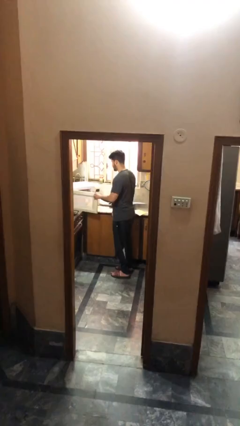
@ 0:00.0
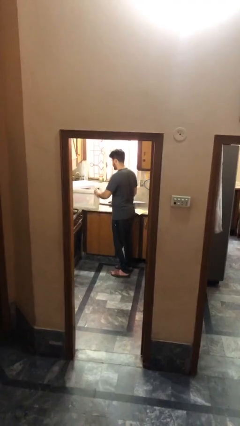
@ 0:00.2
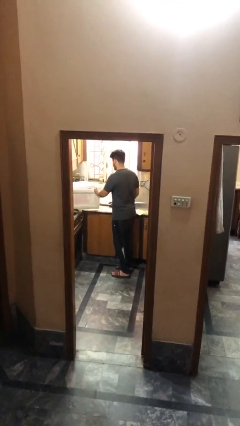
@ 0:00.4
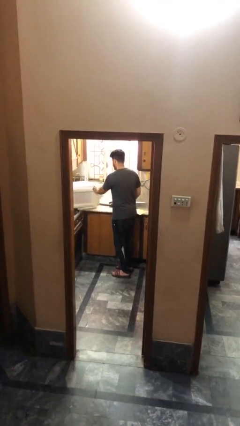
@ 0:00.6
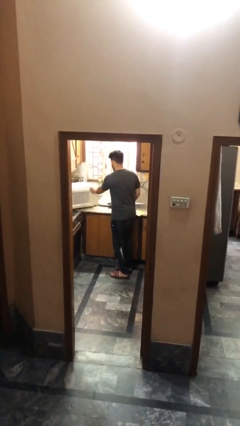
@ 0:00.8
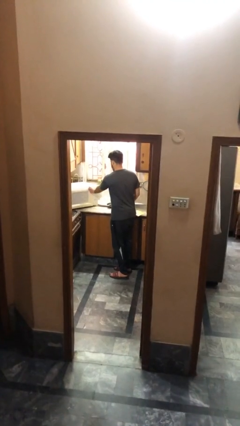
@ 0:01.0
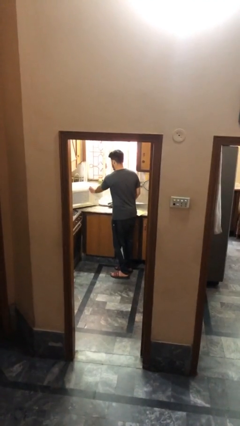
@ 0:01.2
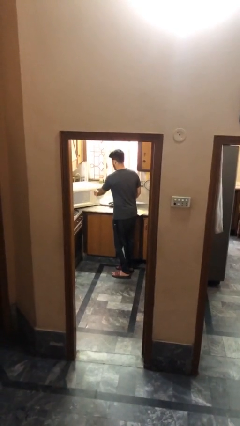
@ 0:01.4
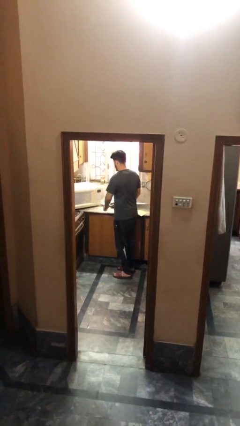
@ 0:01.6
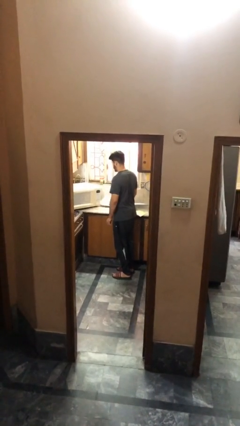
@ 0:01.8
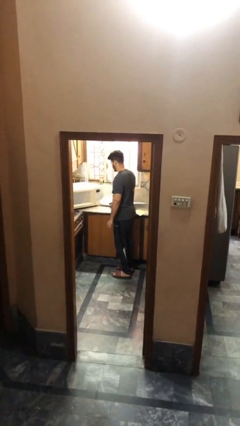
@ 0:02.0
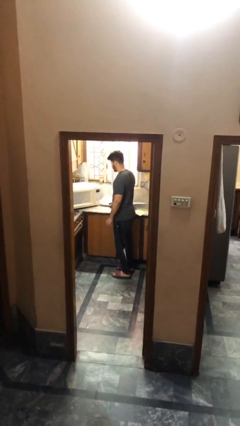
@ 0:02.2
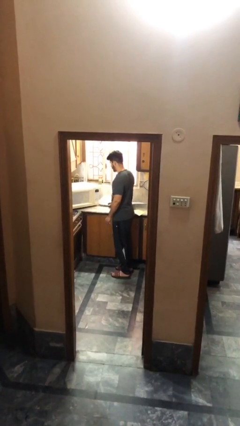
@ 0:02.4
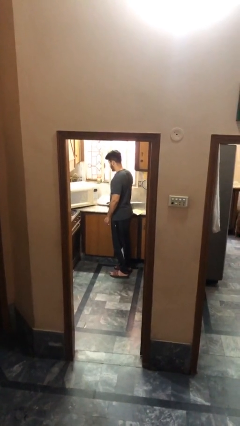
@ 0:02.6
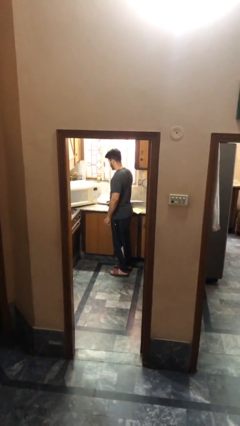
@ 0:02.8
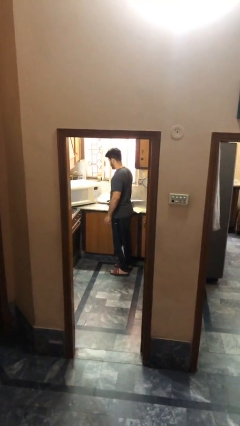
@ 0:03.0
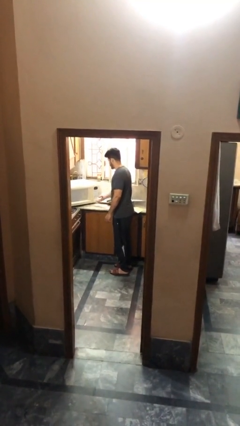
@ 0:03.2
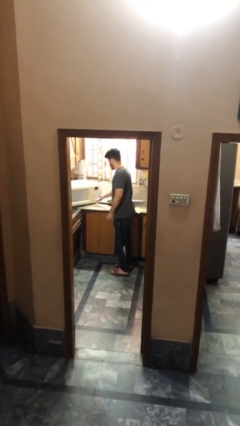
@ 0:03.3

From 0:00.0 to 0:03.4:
person closes microwave

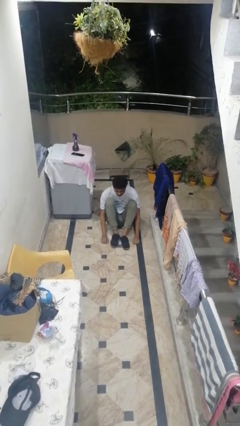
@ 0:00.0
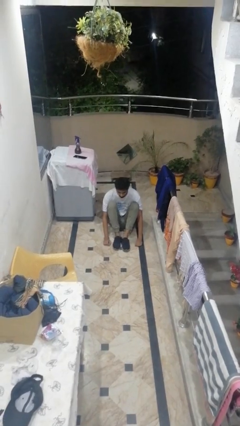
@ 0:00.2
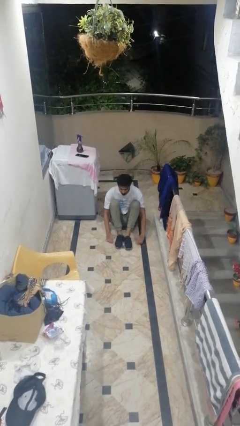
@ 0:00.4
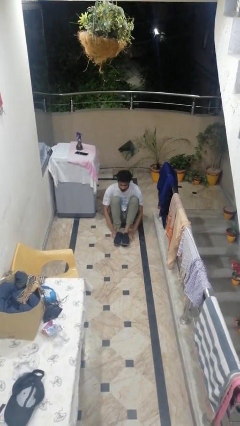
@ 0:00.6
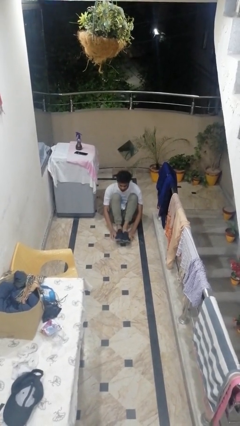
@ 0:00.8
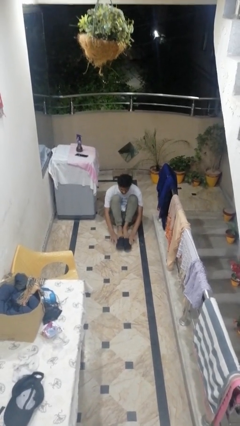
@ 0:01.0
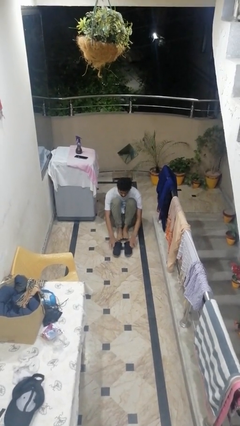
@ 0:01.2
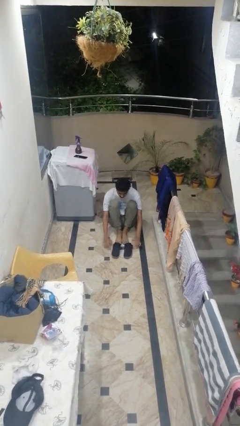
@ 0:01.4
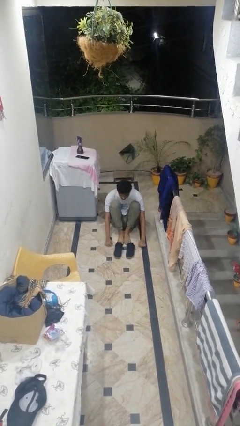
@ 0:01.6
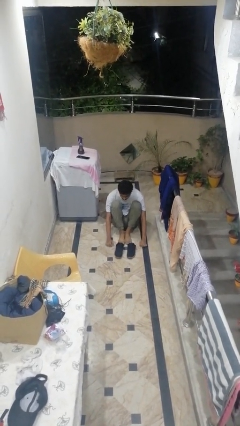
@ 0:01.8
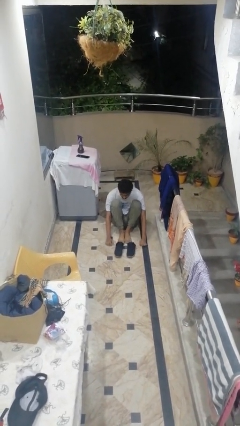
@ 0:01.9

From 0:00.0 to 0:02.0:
person takes off shoes

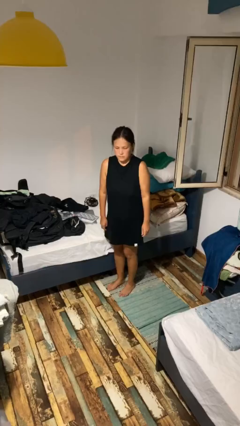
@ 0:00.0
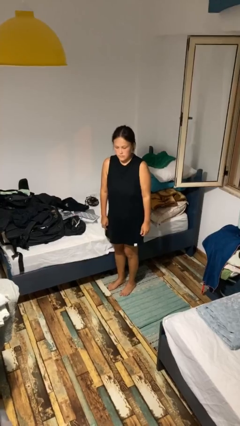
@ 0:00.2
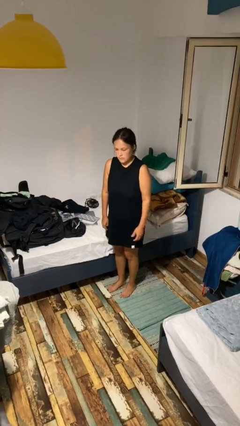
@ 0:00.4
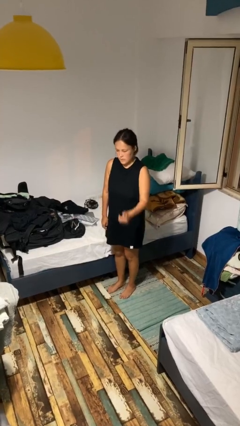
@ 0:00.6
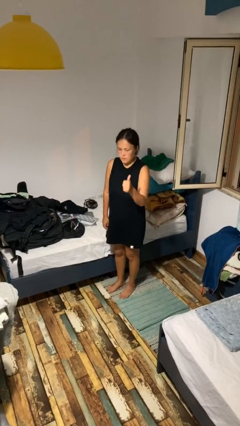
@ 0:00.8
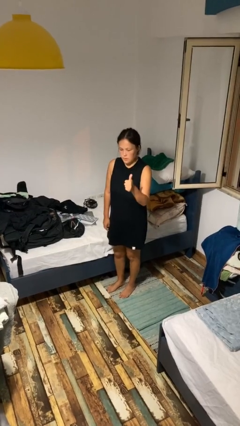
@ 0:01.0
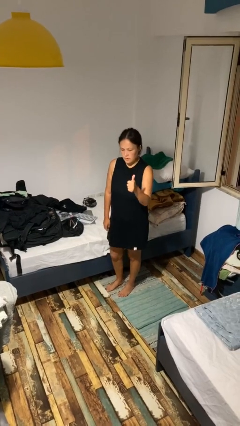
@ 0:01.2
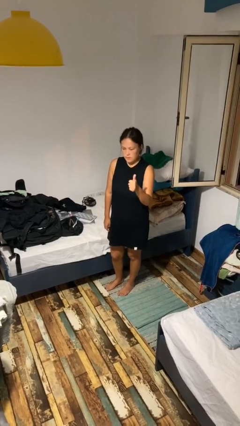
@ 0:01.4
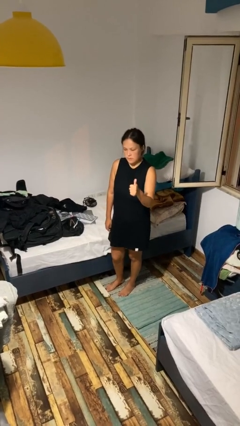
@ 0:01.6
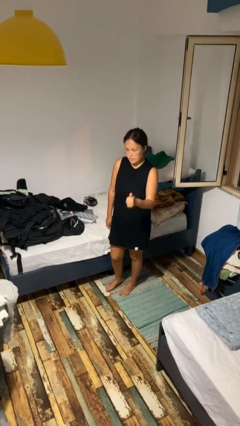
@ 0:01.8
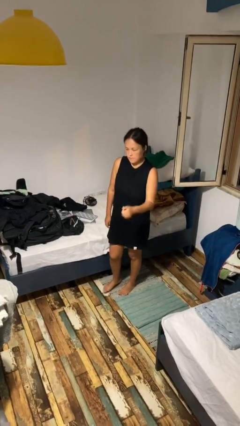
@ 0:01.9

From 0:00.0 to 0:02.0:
person gestures thumbs up

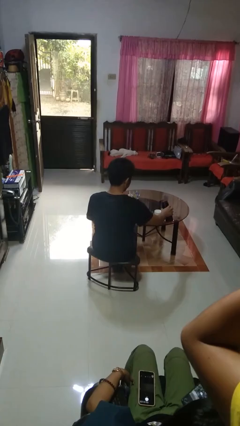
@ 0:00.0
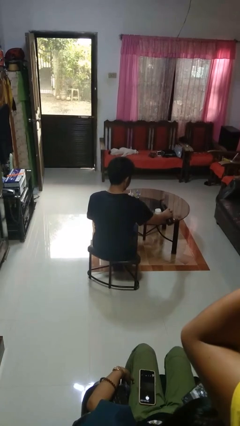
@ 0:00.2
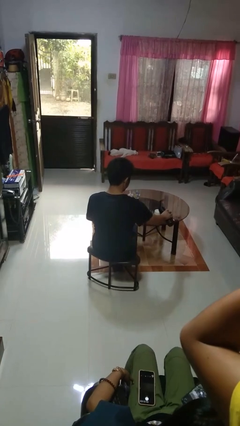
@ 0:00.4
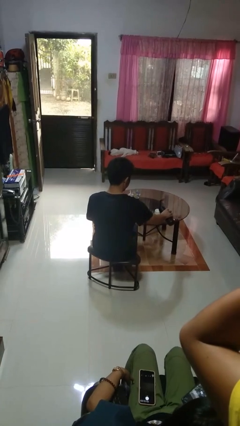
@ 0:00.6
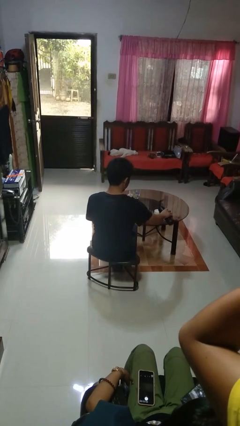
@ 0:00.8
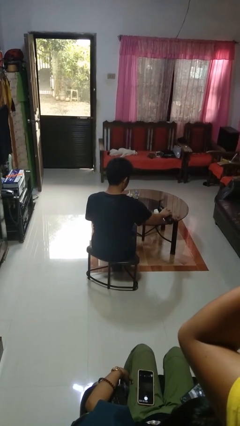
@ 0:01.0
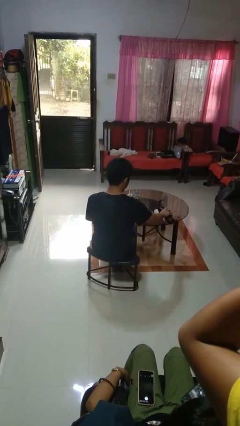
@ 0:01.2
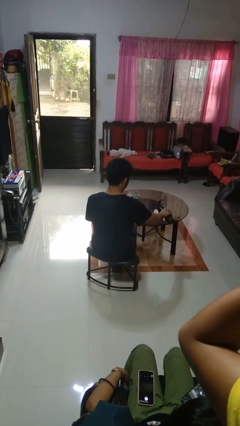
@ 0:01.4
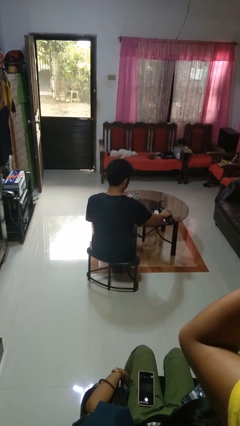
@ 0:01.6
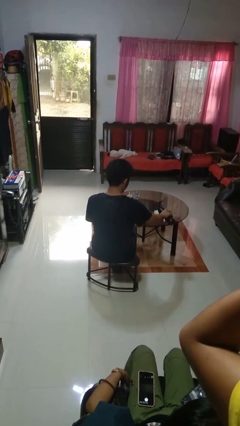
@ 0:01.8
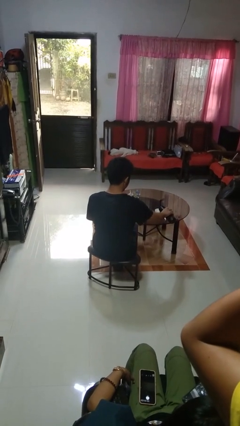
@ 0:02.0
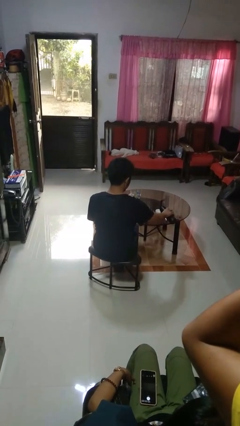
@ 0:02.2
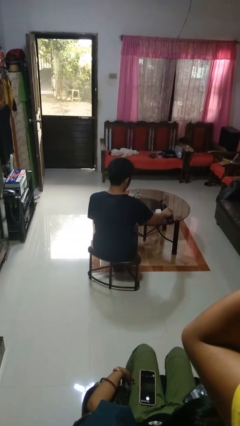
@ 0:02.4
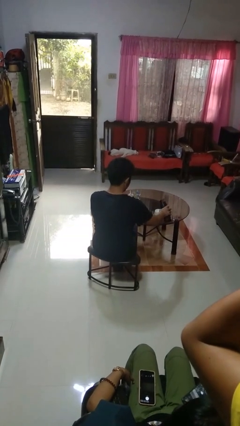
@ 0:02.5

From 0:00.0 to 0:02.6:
person pours liquid into cup

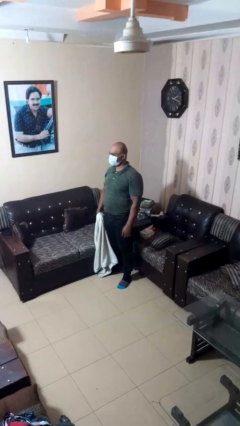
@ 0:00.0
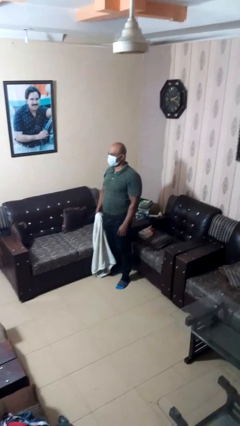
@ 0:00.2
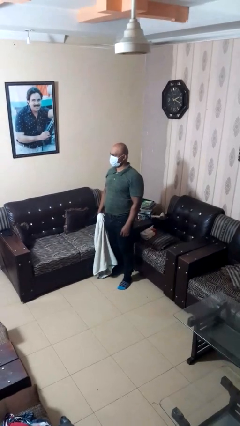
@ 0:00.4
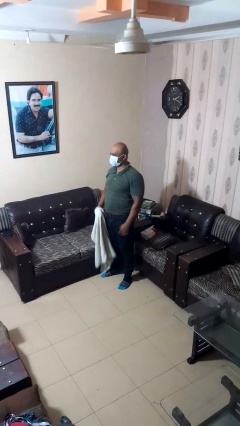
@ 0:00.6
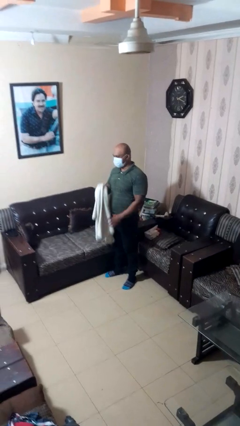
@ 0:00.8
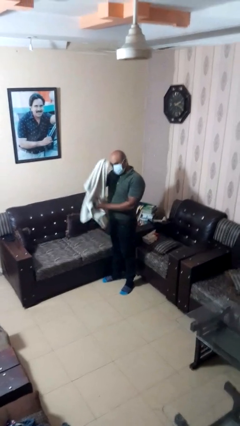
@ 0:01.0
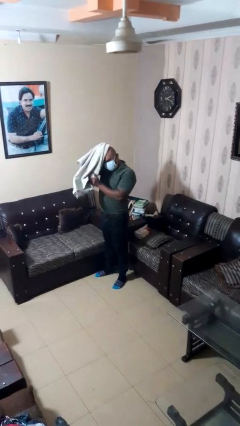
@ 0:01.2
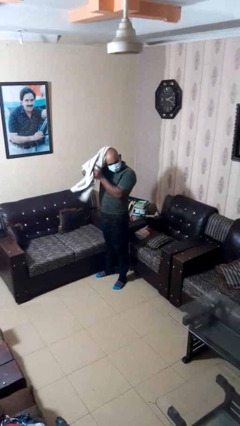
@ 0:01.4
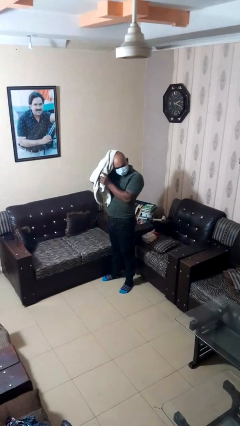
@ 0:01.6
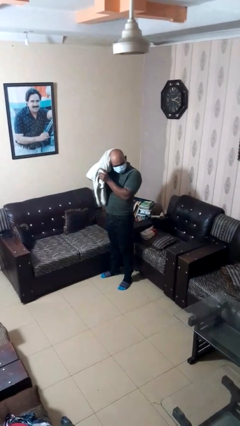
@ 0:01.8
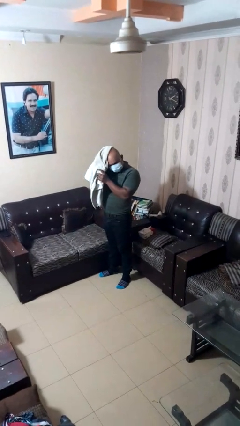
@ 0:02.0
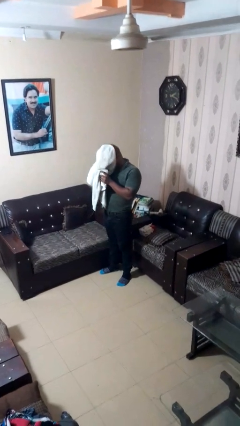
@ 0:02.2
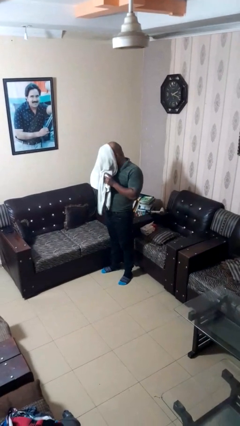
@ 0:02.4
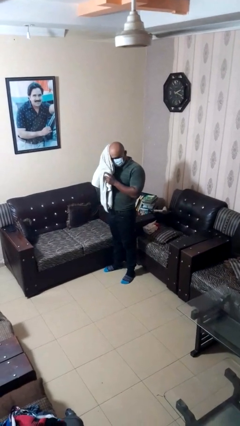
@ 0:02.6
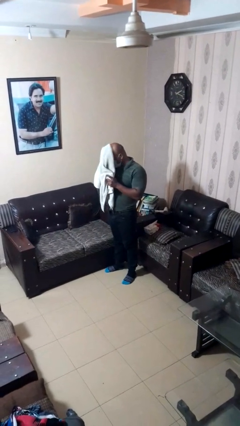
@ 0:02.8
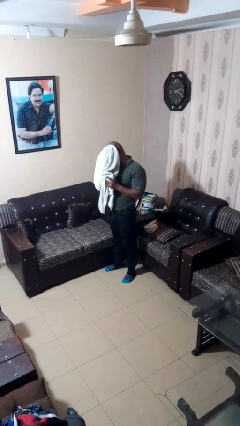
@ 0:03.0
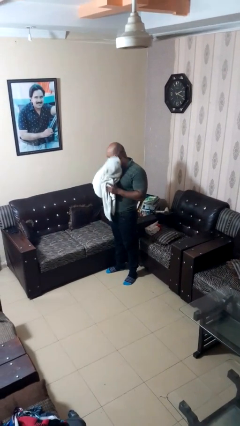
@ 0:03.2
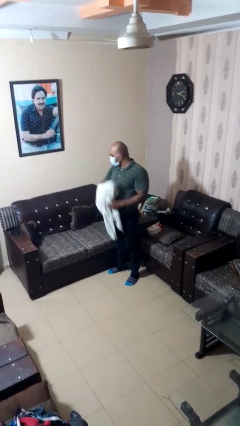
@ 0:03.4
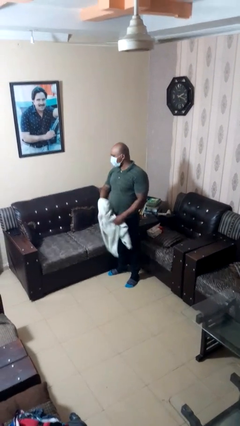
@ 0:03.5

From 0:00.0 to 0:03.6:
person dries hair with towel

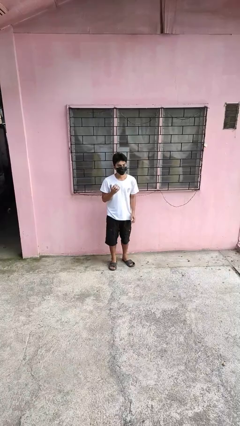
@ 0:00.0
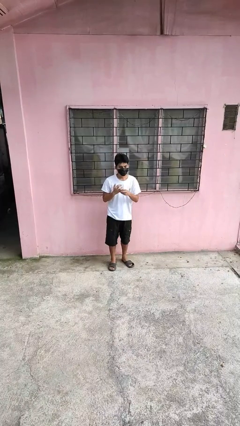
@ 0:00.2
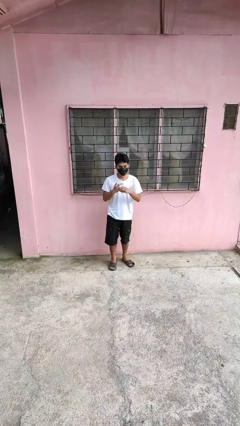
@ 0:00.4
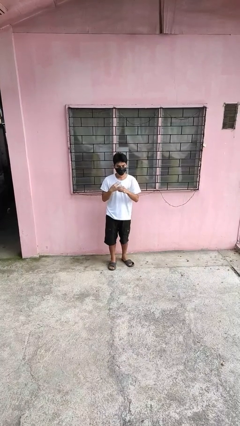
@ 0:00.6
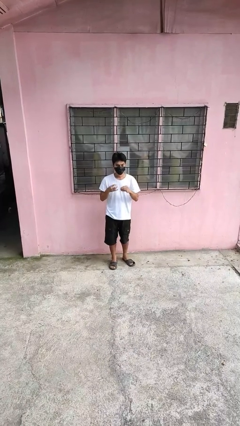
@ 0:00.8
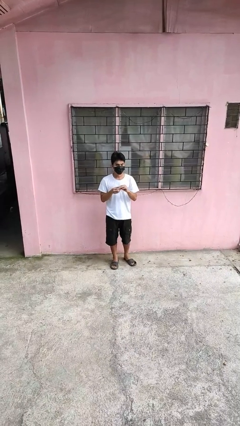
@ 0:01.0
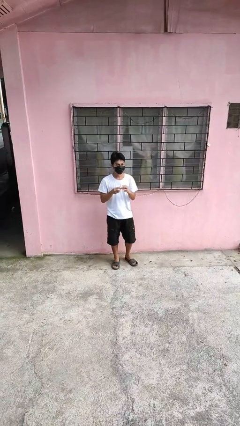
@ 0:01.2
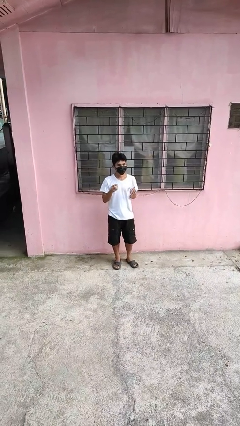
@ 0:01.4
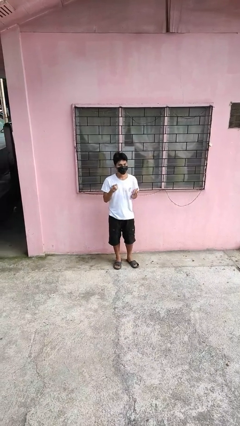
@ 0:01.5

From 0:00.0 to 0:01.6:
person takes off ring

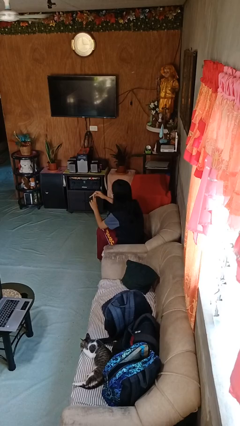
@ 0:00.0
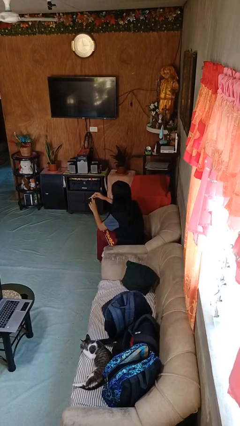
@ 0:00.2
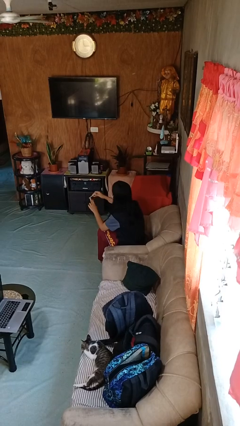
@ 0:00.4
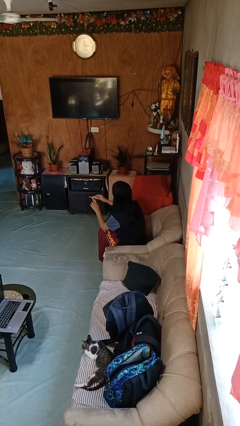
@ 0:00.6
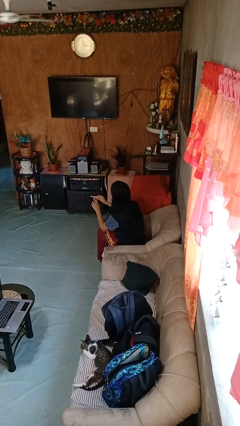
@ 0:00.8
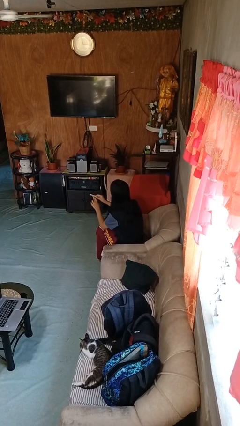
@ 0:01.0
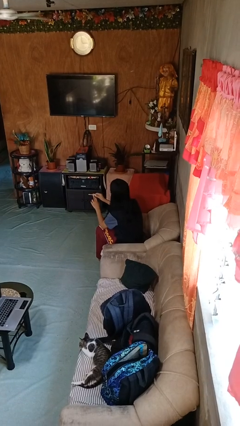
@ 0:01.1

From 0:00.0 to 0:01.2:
person files fingernails

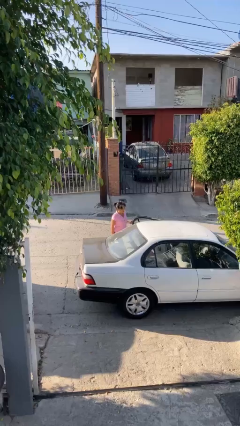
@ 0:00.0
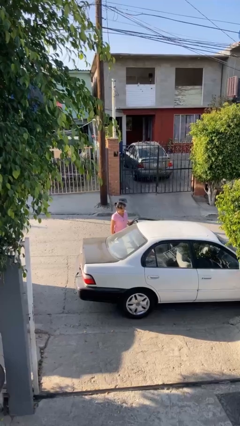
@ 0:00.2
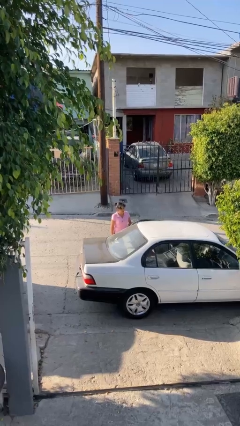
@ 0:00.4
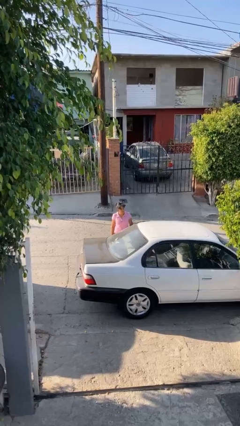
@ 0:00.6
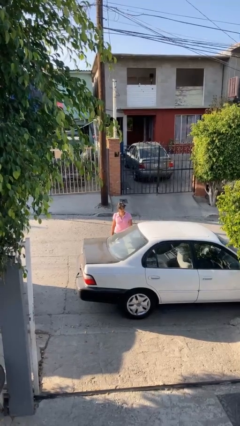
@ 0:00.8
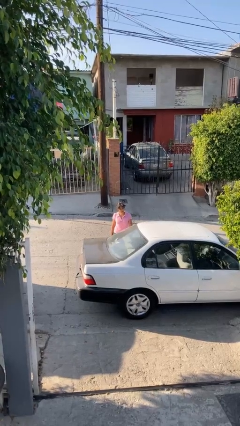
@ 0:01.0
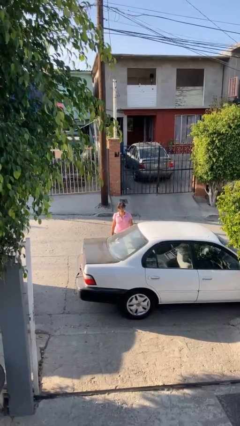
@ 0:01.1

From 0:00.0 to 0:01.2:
person closes car door
